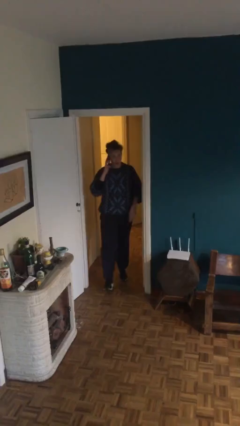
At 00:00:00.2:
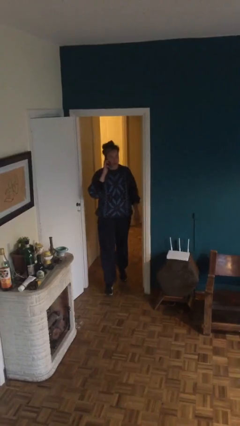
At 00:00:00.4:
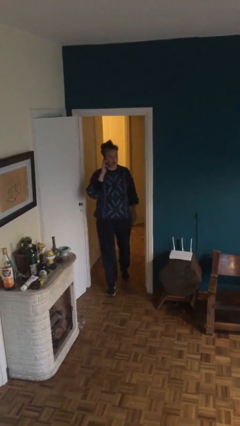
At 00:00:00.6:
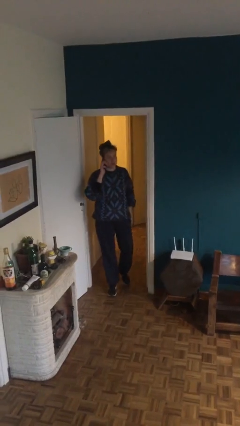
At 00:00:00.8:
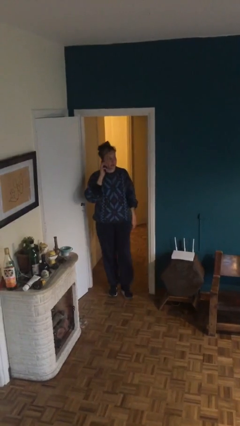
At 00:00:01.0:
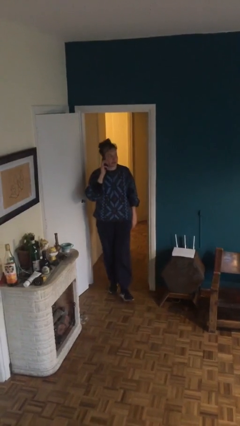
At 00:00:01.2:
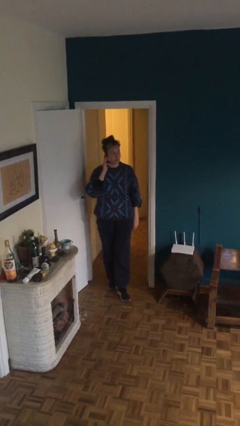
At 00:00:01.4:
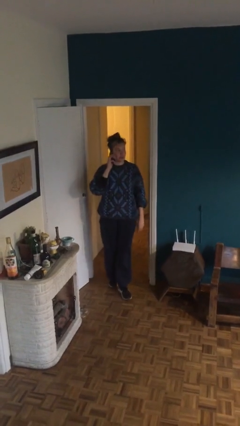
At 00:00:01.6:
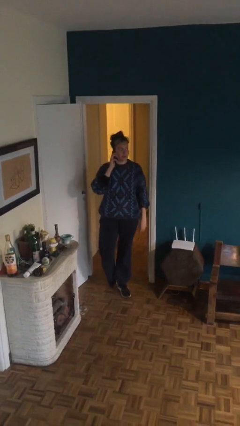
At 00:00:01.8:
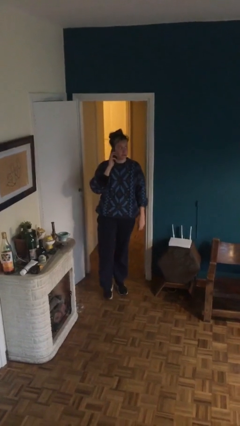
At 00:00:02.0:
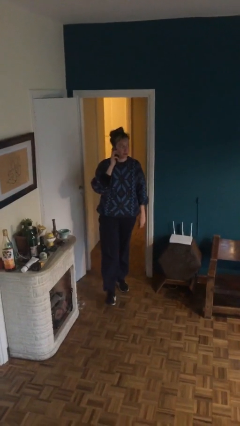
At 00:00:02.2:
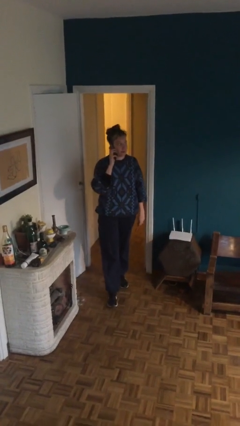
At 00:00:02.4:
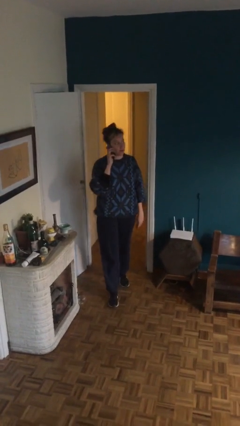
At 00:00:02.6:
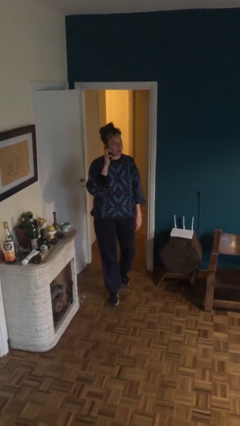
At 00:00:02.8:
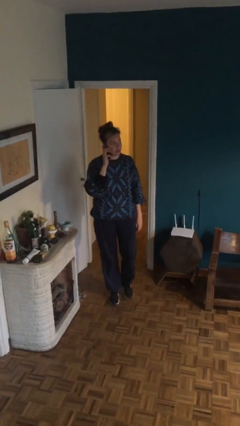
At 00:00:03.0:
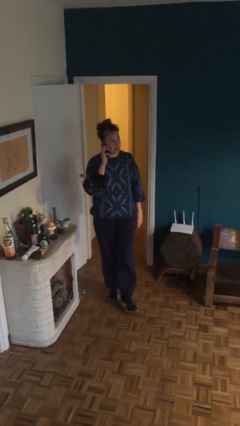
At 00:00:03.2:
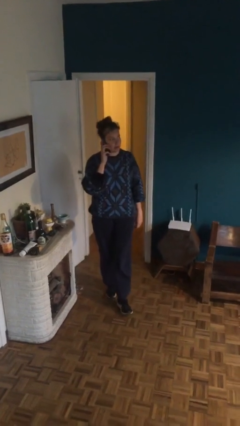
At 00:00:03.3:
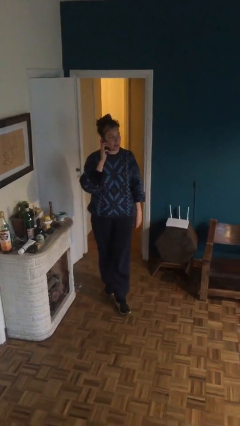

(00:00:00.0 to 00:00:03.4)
person talks on phone

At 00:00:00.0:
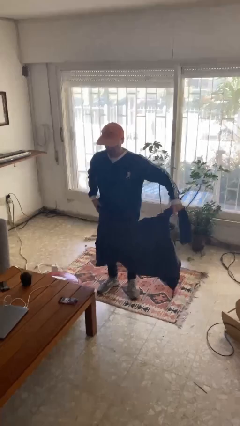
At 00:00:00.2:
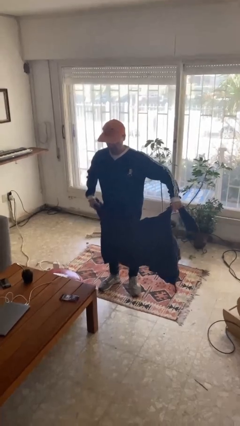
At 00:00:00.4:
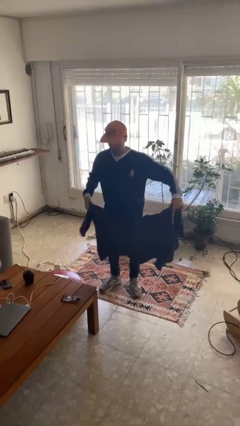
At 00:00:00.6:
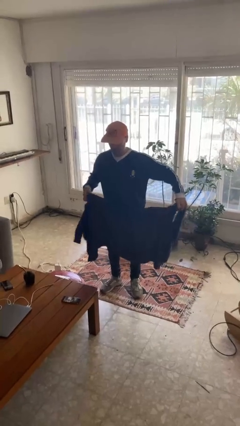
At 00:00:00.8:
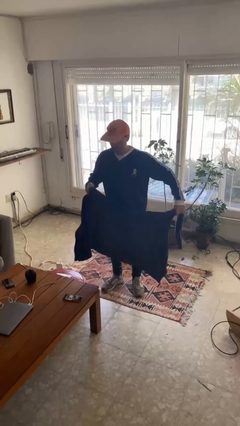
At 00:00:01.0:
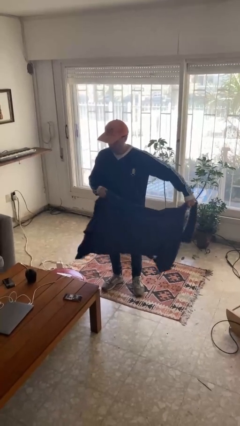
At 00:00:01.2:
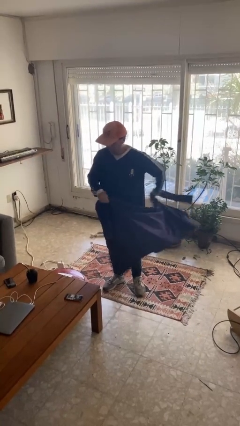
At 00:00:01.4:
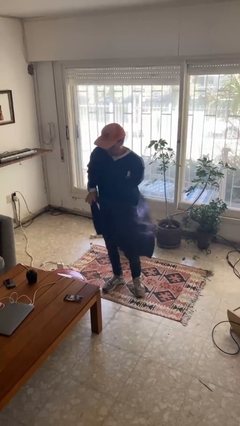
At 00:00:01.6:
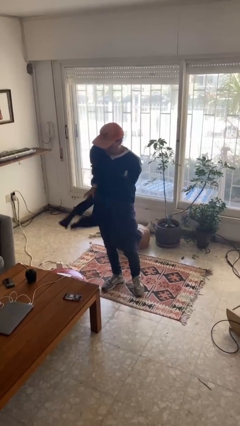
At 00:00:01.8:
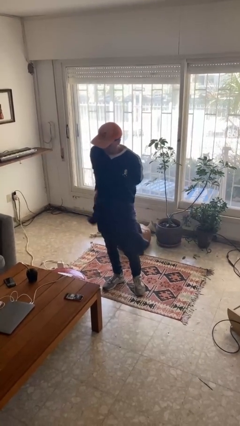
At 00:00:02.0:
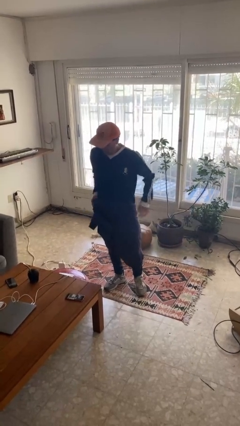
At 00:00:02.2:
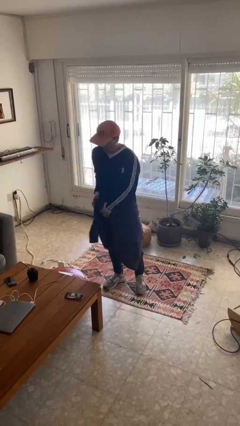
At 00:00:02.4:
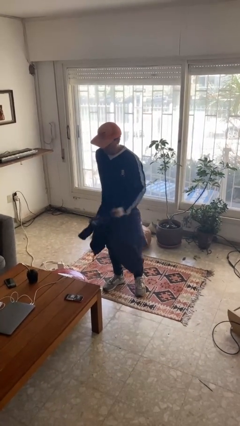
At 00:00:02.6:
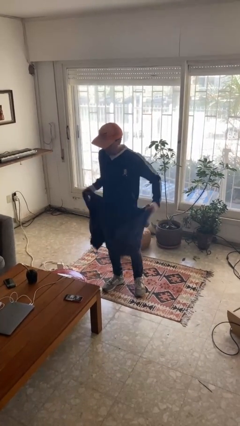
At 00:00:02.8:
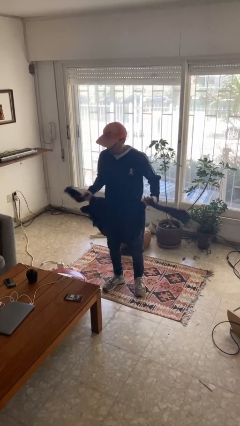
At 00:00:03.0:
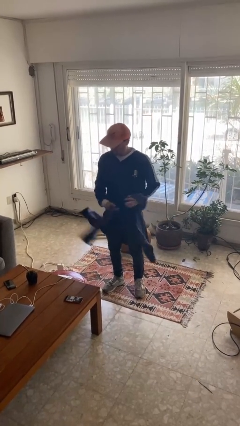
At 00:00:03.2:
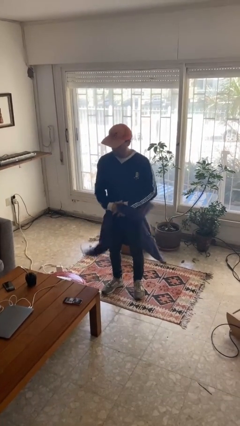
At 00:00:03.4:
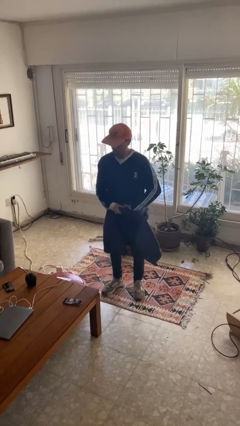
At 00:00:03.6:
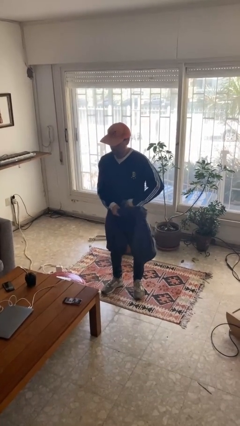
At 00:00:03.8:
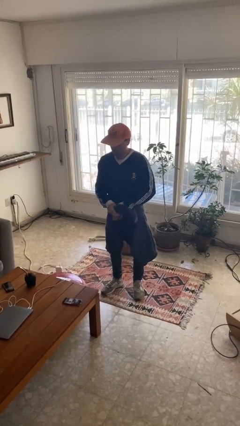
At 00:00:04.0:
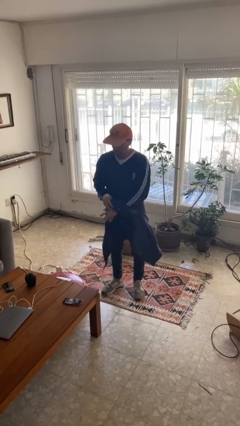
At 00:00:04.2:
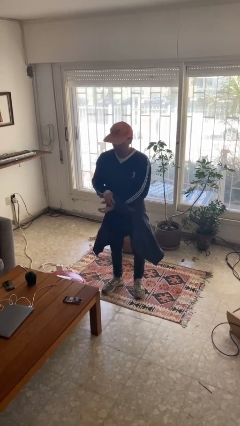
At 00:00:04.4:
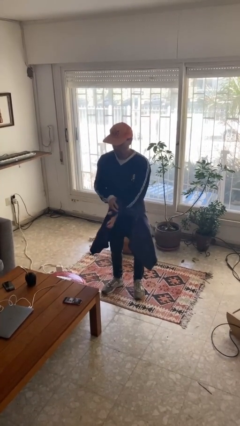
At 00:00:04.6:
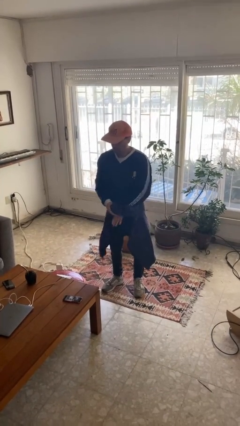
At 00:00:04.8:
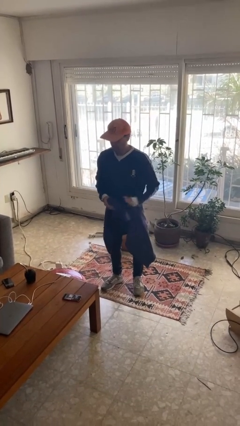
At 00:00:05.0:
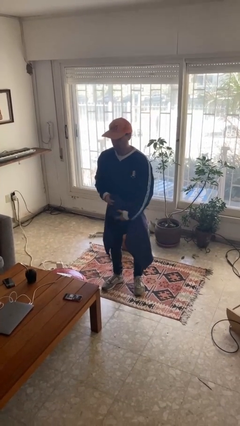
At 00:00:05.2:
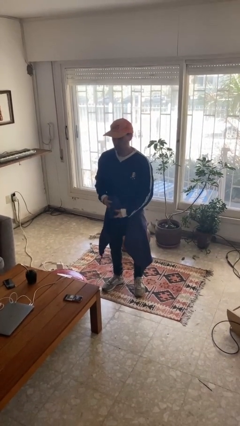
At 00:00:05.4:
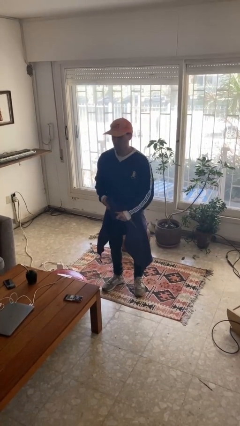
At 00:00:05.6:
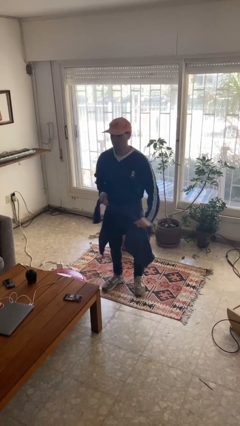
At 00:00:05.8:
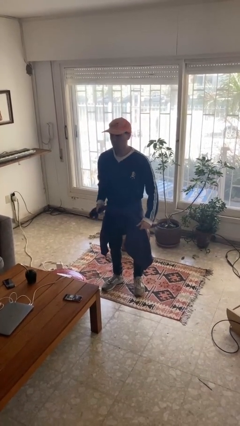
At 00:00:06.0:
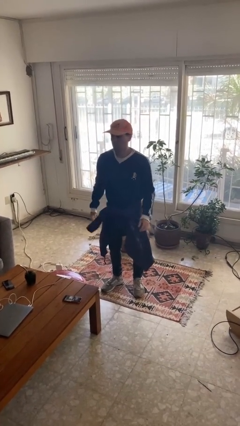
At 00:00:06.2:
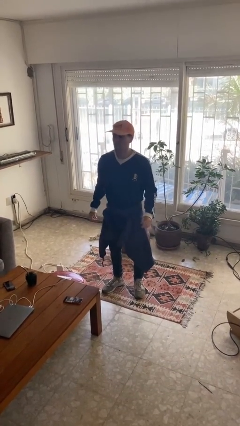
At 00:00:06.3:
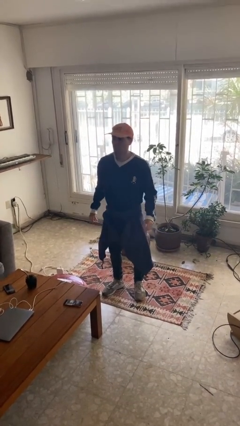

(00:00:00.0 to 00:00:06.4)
person ties jacket around waist

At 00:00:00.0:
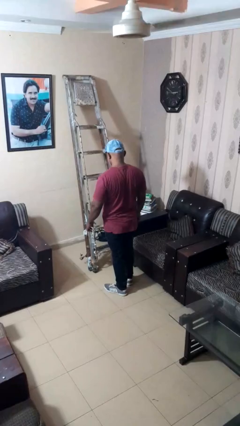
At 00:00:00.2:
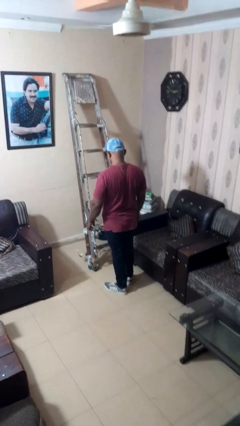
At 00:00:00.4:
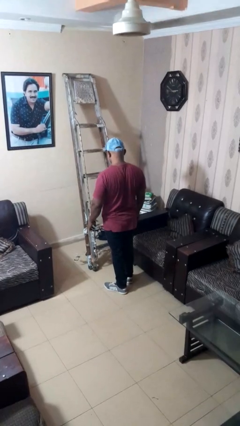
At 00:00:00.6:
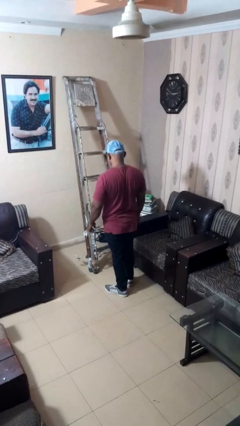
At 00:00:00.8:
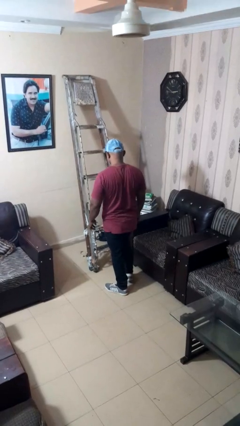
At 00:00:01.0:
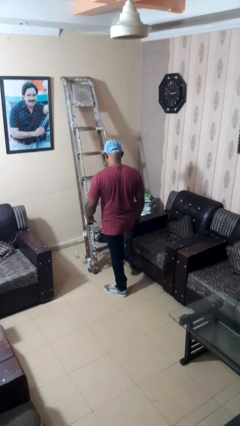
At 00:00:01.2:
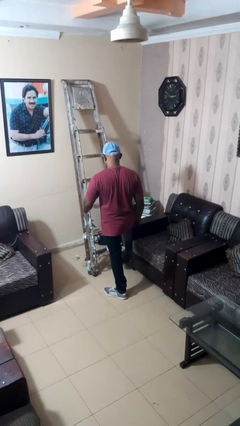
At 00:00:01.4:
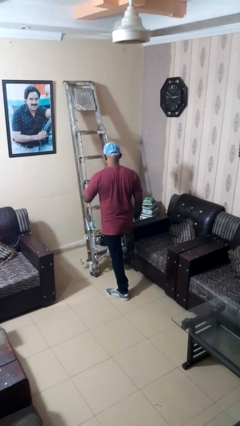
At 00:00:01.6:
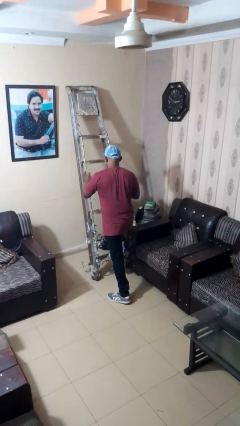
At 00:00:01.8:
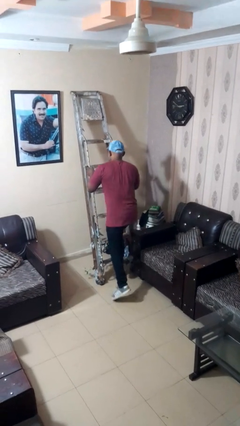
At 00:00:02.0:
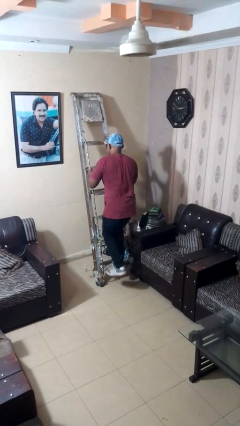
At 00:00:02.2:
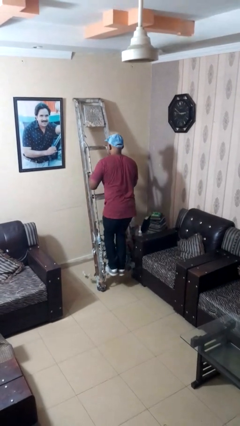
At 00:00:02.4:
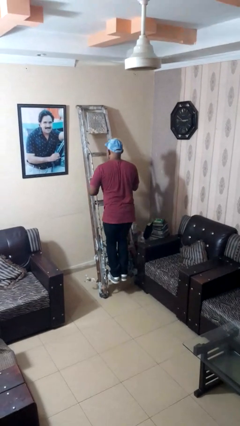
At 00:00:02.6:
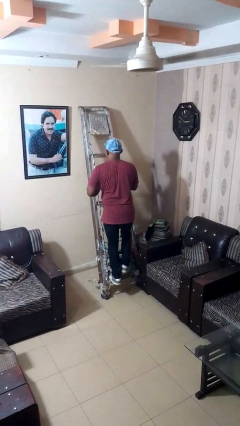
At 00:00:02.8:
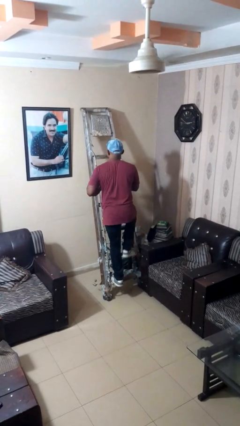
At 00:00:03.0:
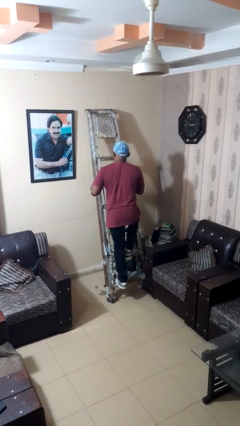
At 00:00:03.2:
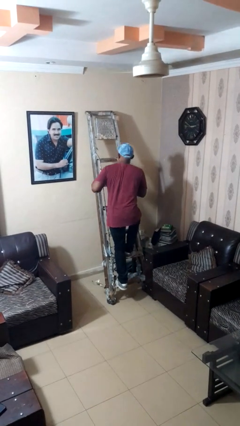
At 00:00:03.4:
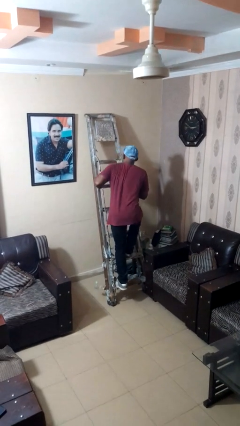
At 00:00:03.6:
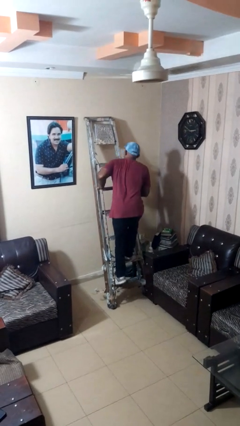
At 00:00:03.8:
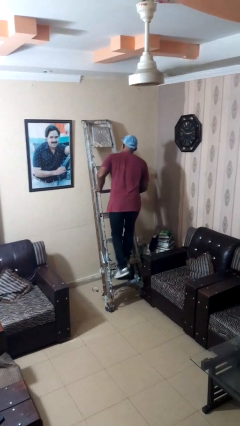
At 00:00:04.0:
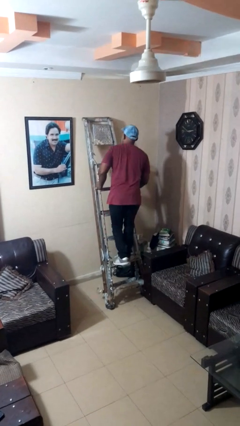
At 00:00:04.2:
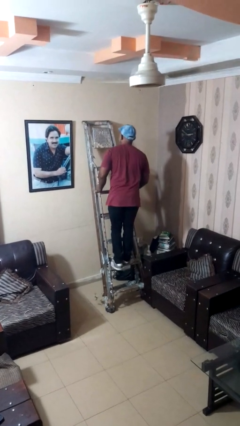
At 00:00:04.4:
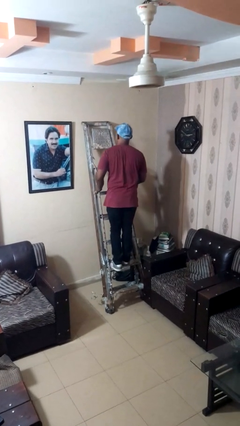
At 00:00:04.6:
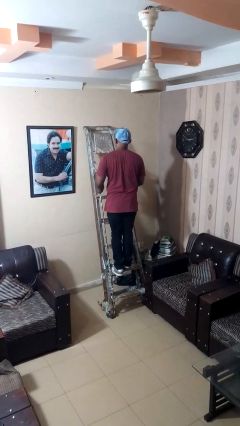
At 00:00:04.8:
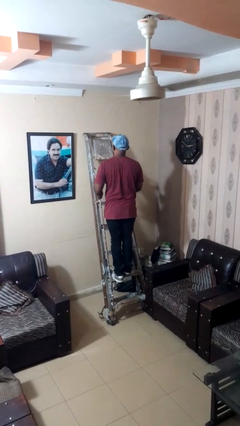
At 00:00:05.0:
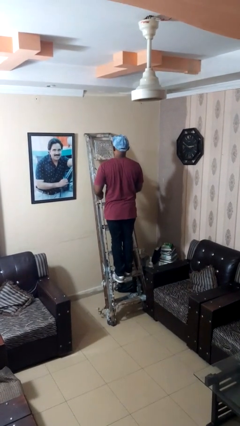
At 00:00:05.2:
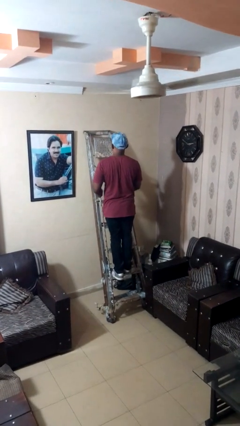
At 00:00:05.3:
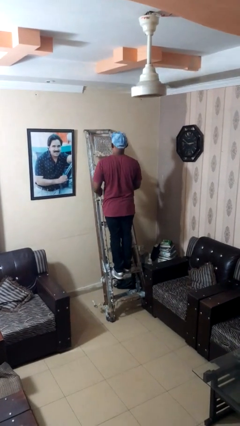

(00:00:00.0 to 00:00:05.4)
person climbs up ladder

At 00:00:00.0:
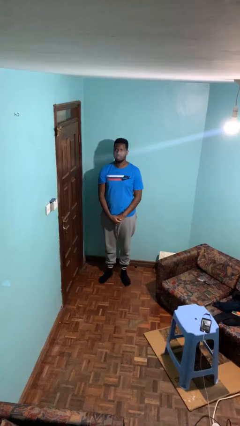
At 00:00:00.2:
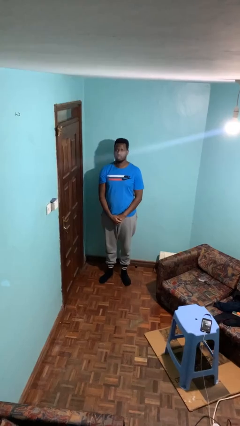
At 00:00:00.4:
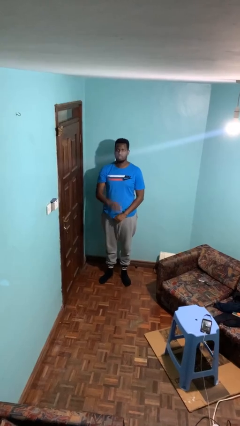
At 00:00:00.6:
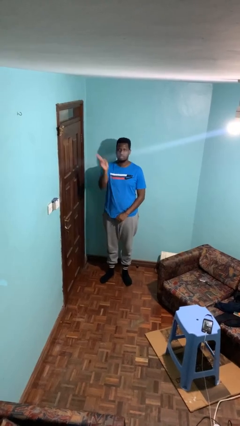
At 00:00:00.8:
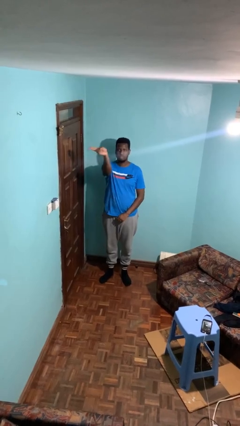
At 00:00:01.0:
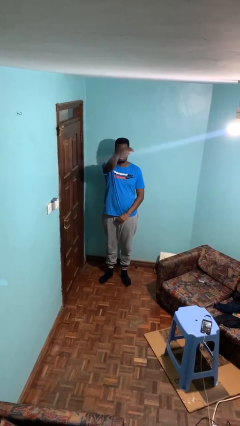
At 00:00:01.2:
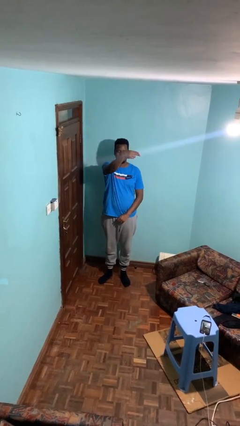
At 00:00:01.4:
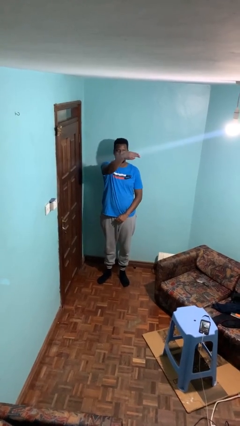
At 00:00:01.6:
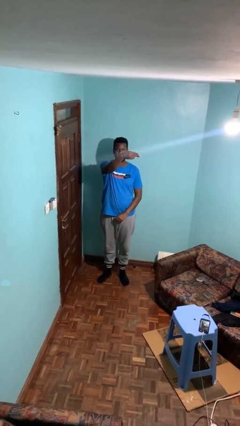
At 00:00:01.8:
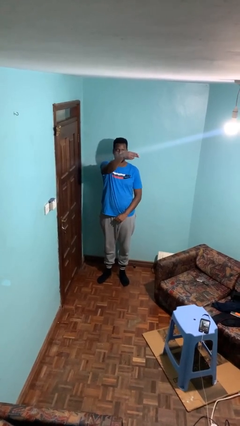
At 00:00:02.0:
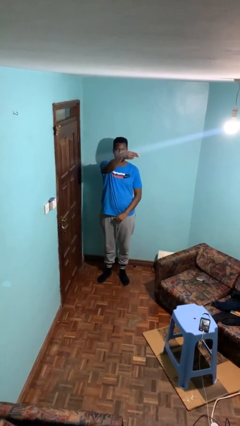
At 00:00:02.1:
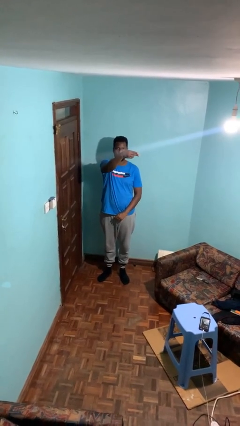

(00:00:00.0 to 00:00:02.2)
person gestures swipe left
